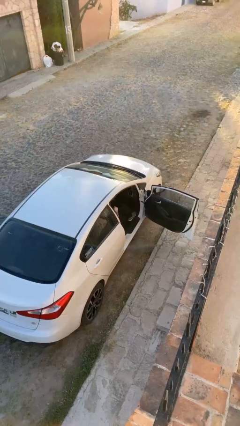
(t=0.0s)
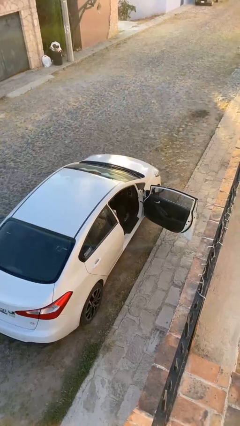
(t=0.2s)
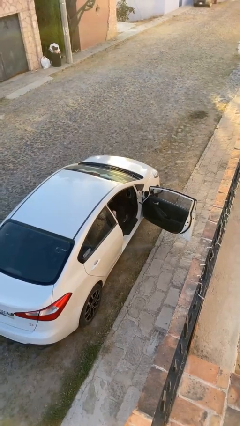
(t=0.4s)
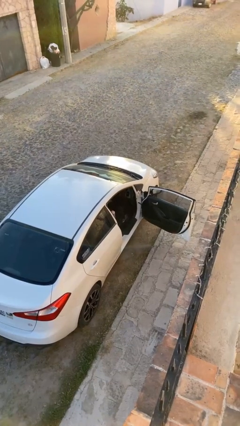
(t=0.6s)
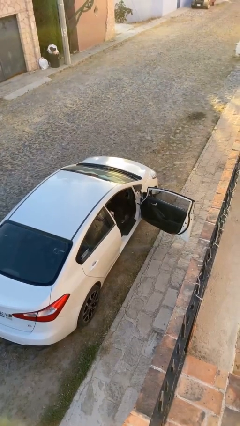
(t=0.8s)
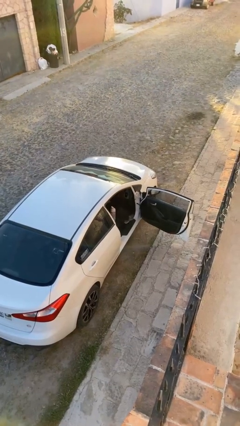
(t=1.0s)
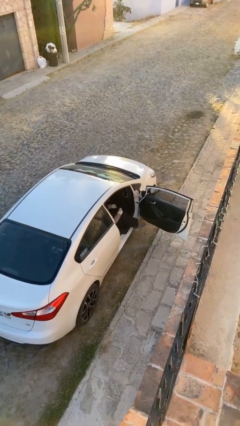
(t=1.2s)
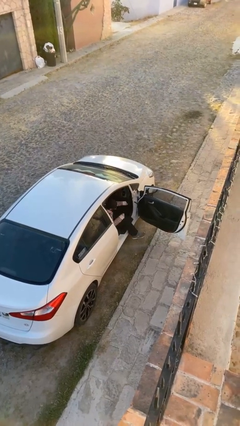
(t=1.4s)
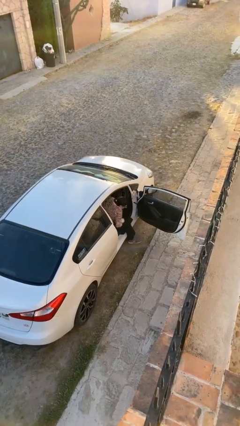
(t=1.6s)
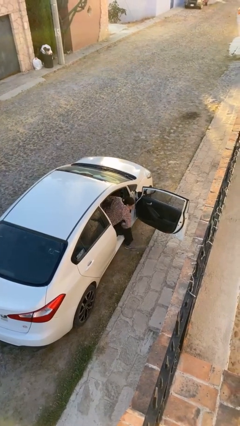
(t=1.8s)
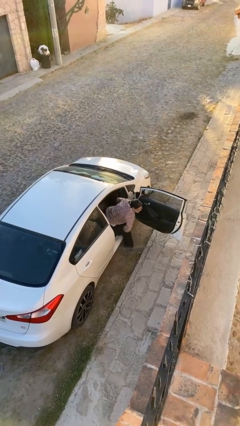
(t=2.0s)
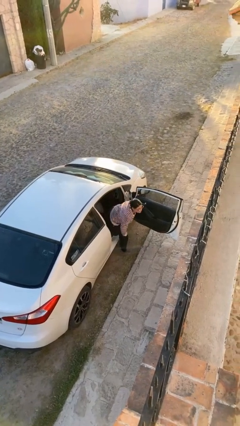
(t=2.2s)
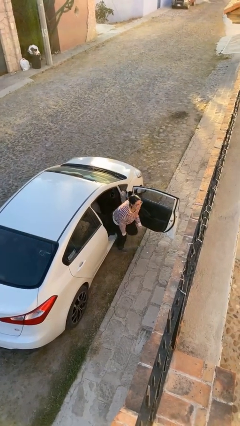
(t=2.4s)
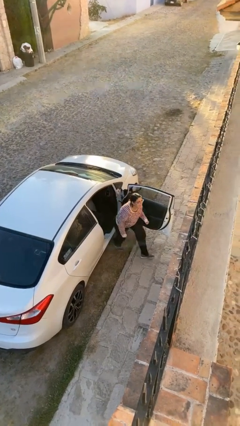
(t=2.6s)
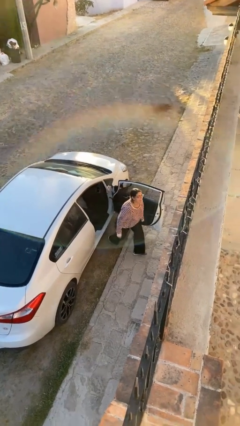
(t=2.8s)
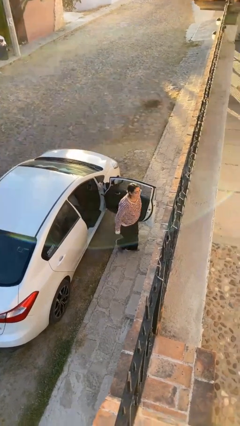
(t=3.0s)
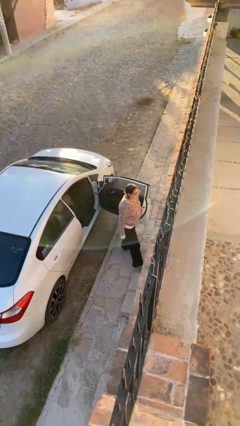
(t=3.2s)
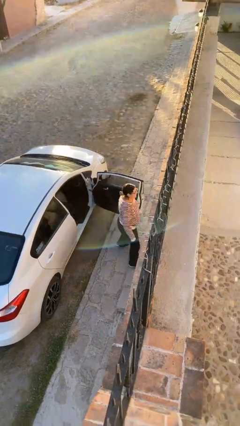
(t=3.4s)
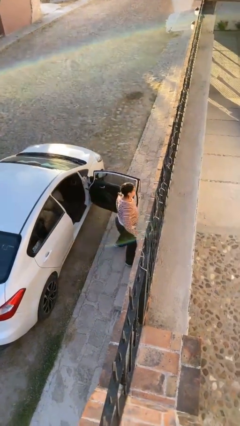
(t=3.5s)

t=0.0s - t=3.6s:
person exits car

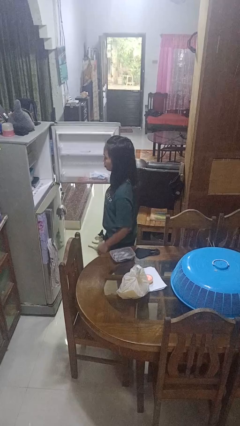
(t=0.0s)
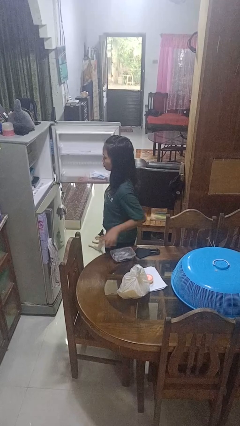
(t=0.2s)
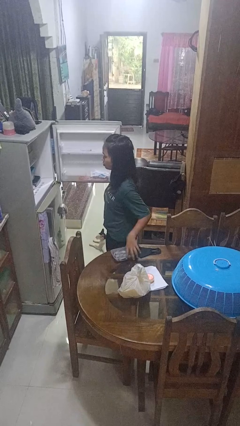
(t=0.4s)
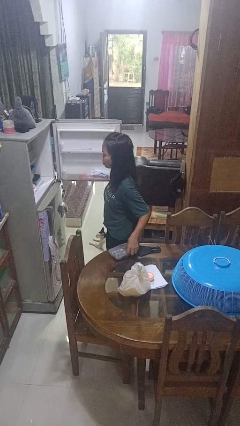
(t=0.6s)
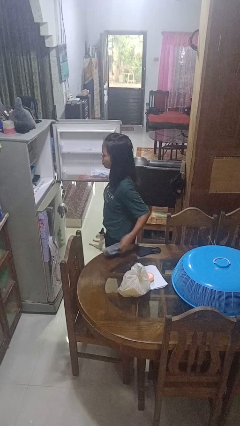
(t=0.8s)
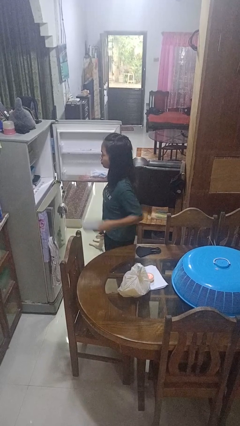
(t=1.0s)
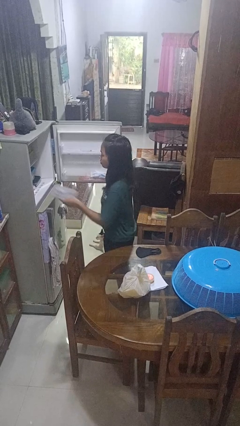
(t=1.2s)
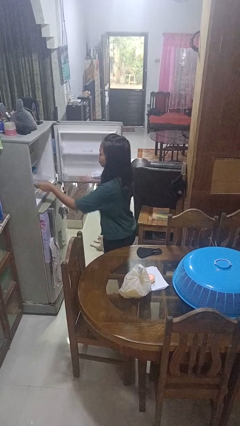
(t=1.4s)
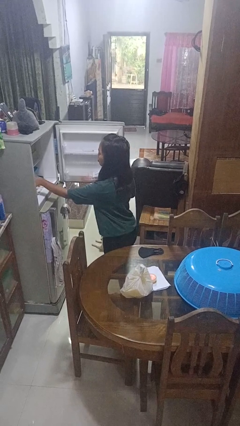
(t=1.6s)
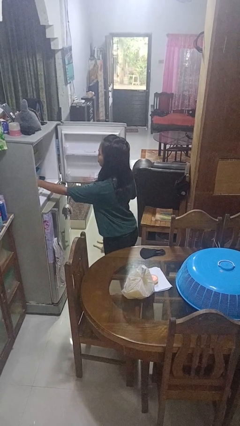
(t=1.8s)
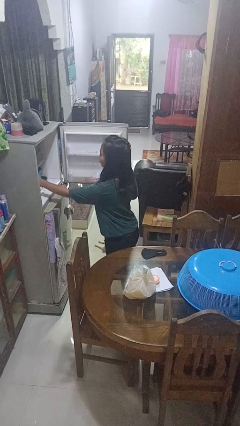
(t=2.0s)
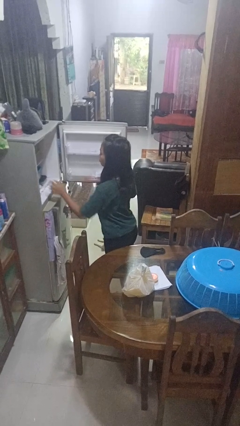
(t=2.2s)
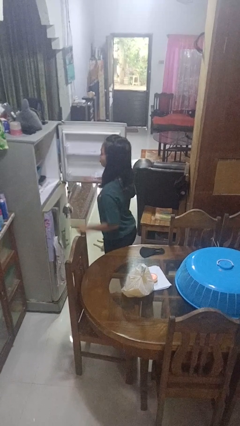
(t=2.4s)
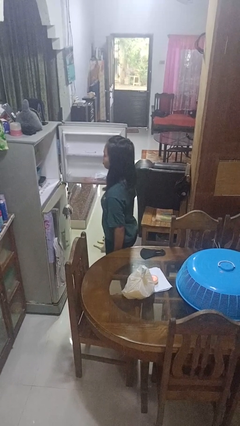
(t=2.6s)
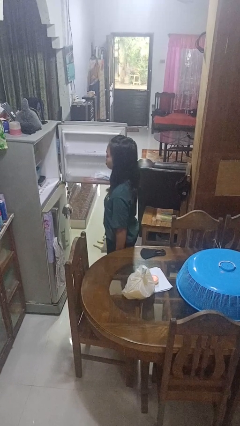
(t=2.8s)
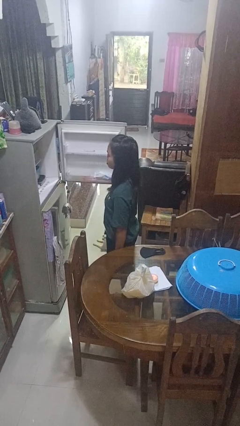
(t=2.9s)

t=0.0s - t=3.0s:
person puts object into refrigerator

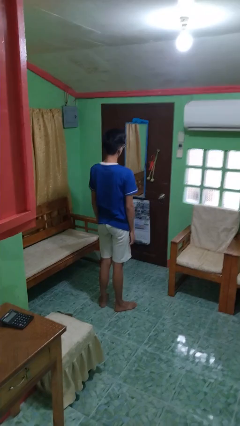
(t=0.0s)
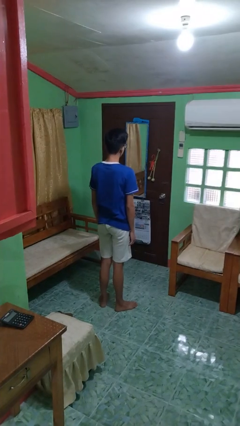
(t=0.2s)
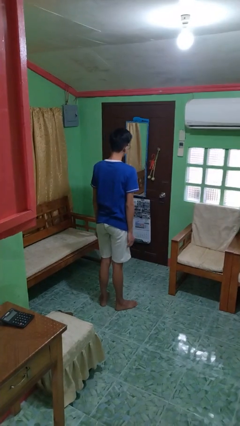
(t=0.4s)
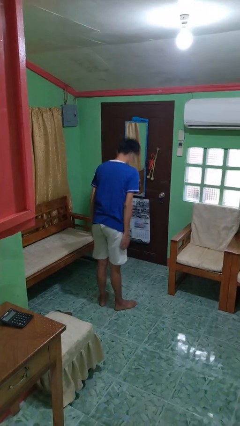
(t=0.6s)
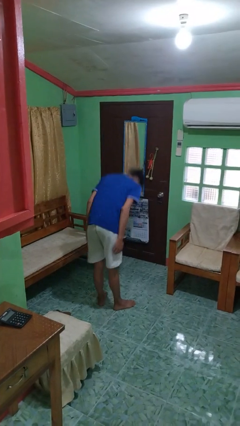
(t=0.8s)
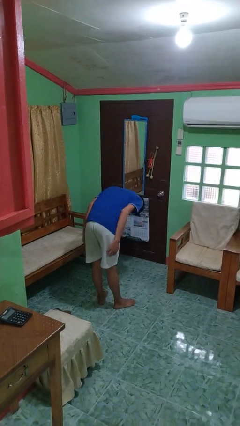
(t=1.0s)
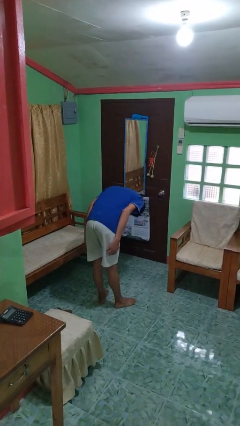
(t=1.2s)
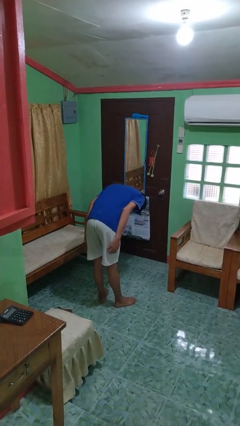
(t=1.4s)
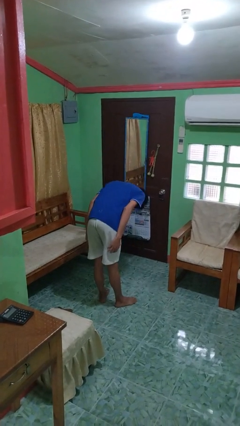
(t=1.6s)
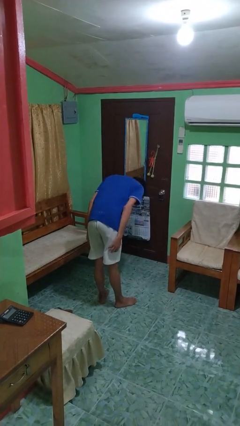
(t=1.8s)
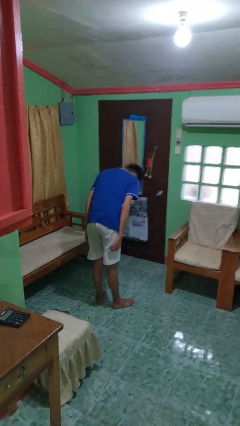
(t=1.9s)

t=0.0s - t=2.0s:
person bows

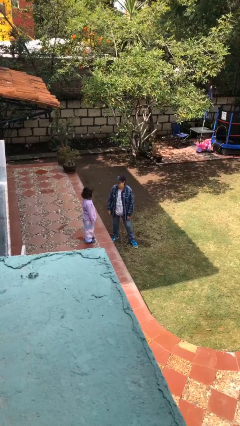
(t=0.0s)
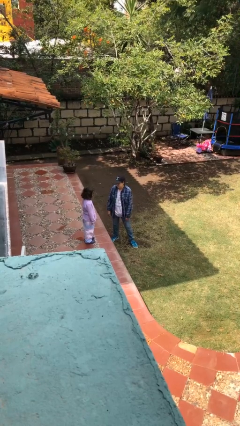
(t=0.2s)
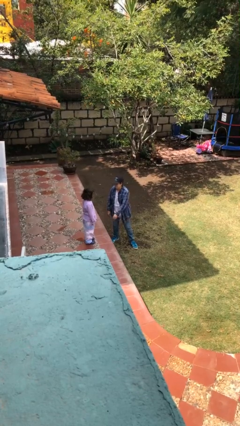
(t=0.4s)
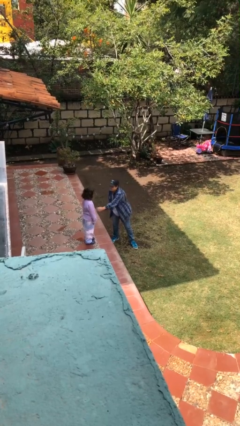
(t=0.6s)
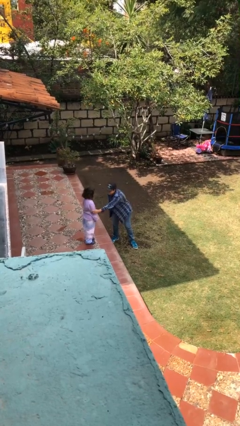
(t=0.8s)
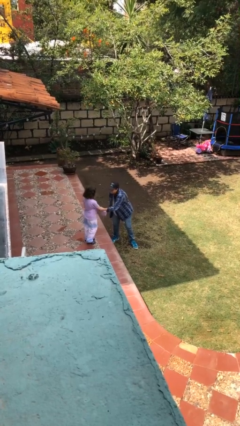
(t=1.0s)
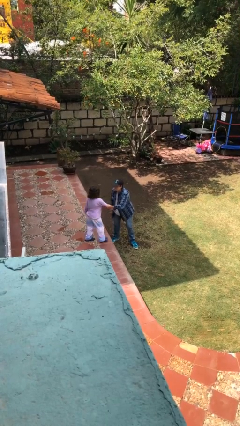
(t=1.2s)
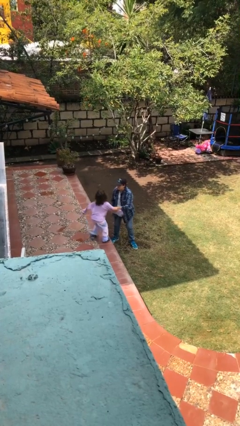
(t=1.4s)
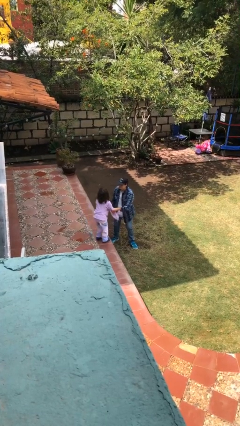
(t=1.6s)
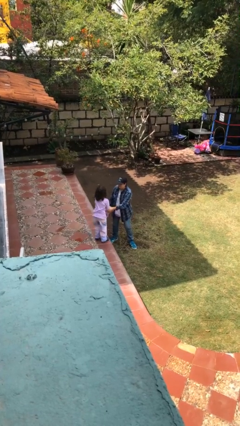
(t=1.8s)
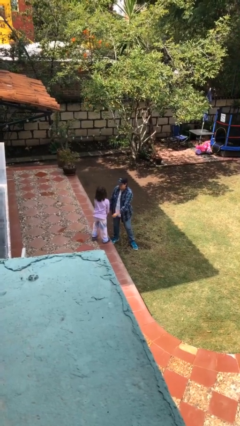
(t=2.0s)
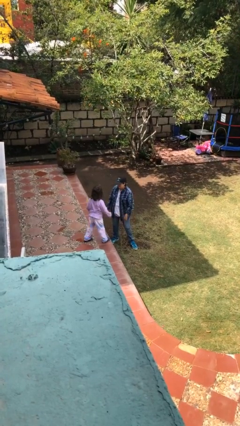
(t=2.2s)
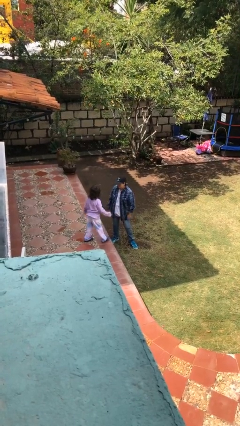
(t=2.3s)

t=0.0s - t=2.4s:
person grabs person by bicep

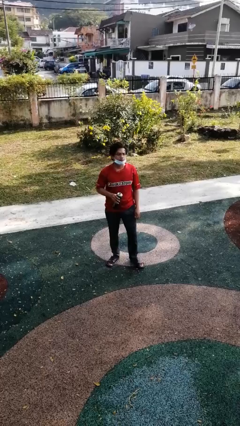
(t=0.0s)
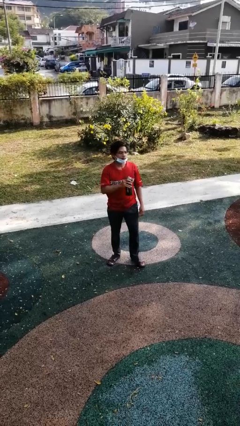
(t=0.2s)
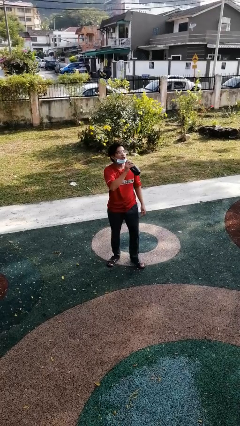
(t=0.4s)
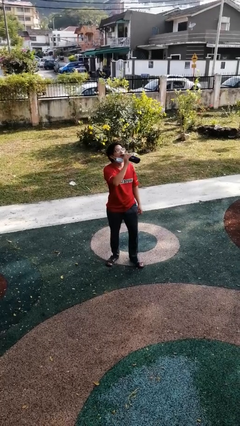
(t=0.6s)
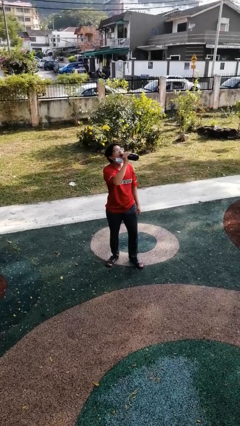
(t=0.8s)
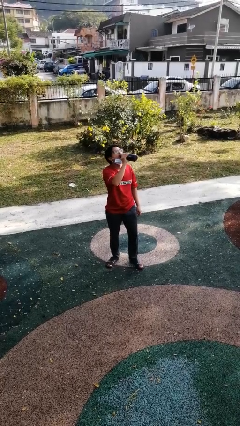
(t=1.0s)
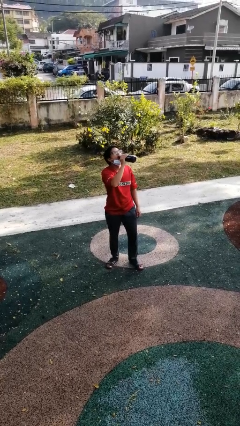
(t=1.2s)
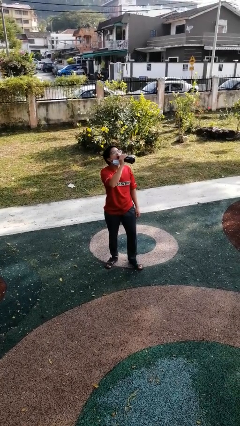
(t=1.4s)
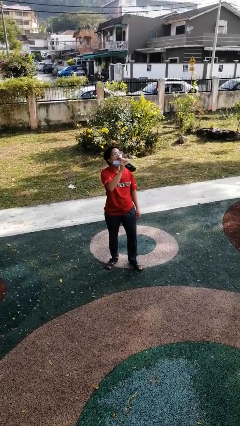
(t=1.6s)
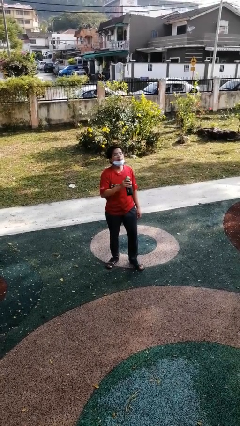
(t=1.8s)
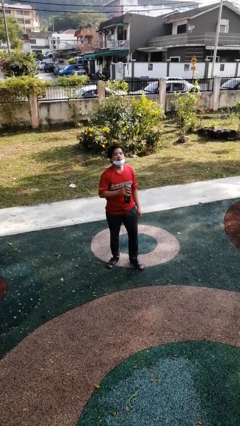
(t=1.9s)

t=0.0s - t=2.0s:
person drinks from bottle

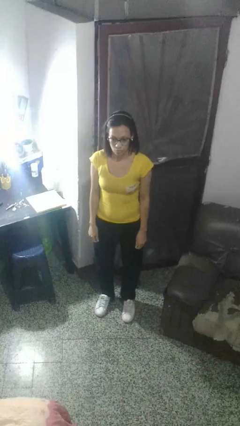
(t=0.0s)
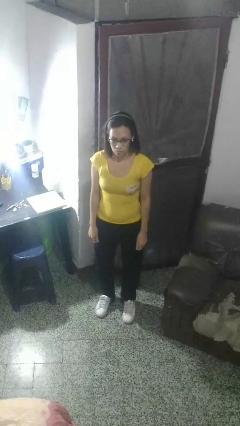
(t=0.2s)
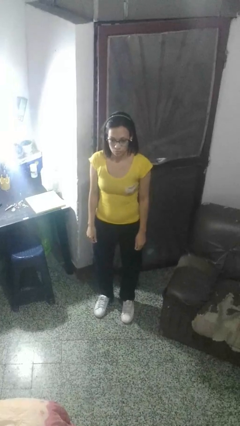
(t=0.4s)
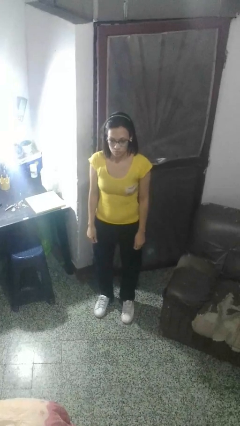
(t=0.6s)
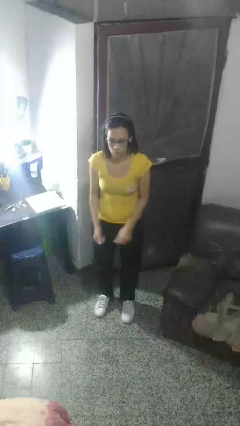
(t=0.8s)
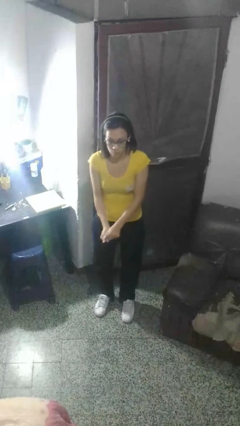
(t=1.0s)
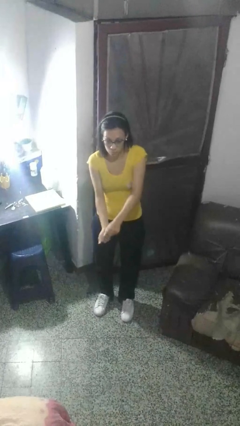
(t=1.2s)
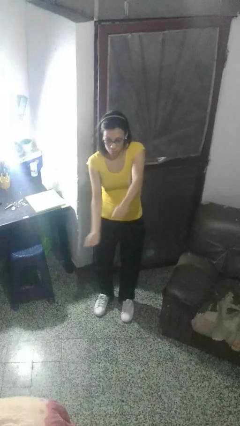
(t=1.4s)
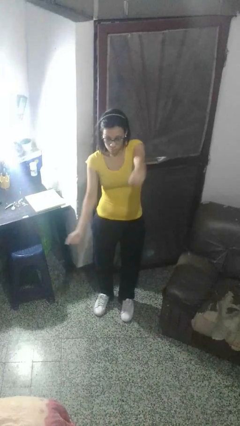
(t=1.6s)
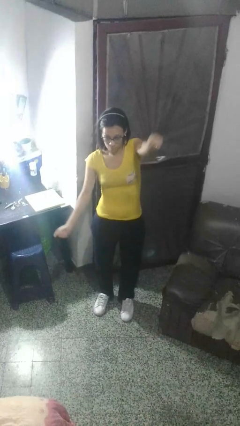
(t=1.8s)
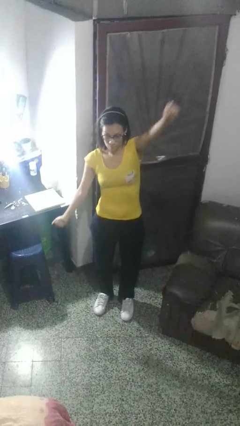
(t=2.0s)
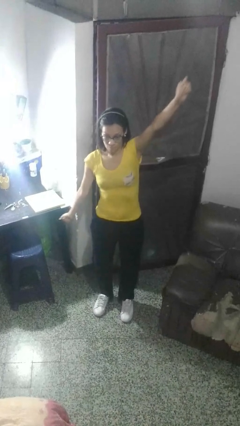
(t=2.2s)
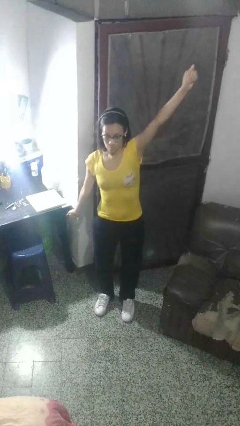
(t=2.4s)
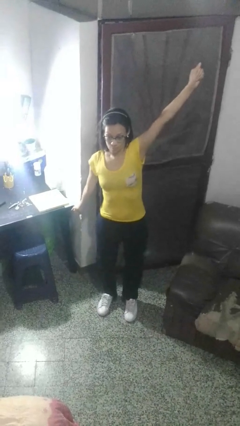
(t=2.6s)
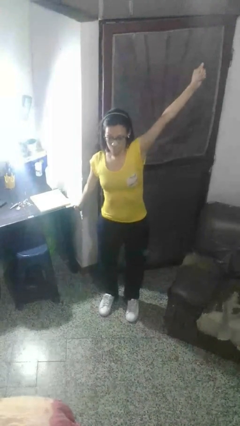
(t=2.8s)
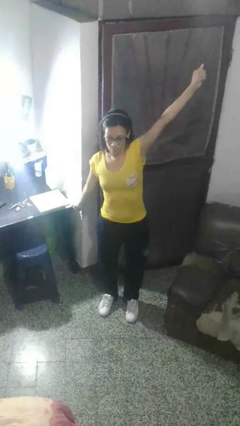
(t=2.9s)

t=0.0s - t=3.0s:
person gestures zoom in

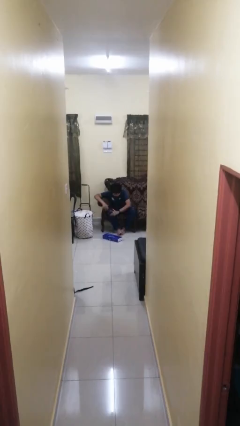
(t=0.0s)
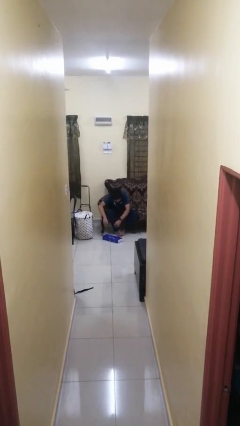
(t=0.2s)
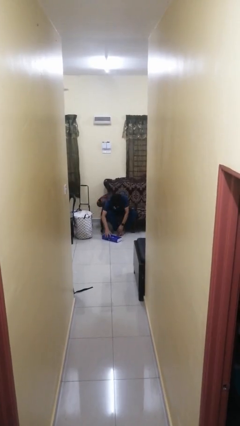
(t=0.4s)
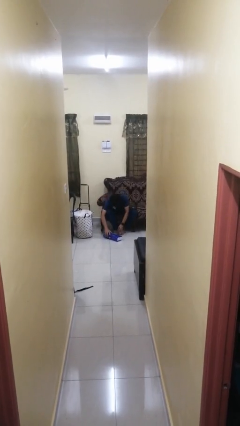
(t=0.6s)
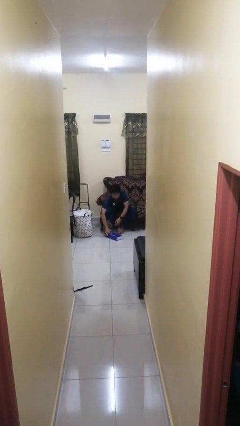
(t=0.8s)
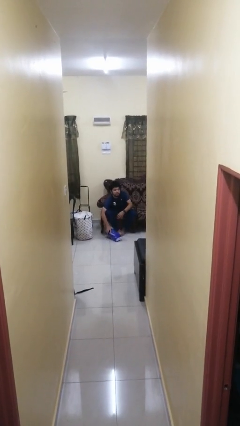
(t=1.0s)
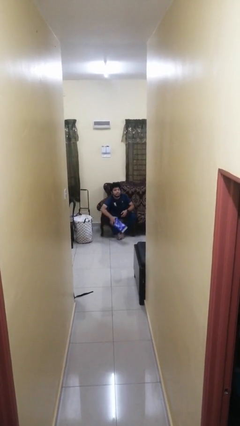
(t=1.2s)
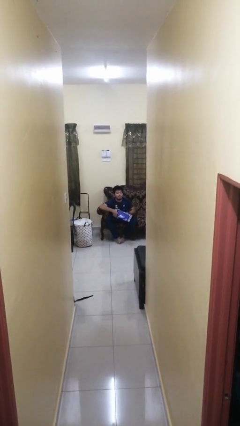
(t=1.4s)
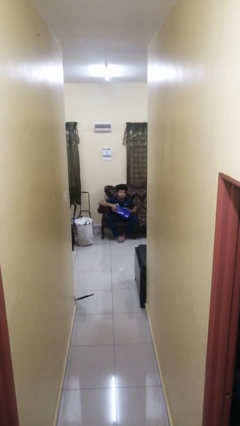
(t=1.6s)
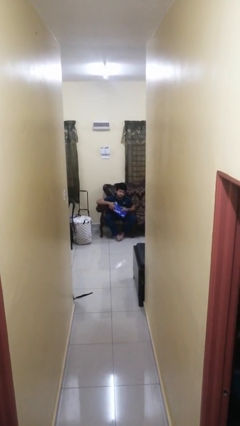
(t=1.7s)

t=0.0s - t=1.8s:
person picks up object from floor
